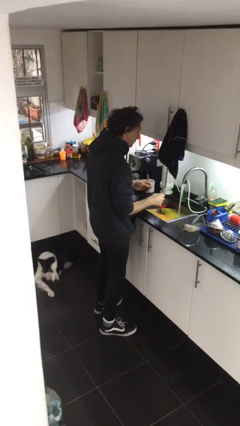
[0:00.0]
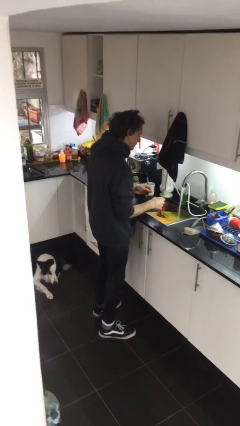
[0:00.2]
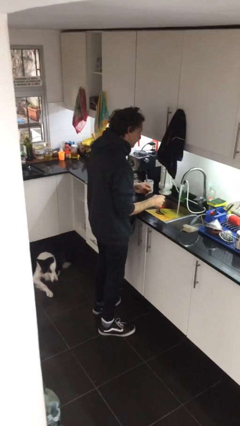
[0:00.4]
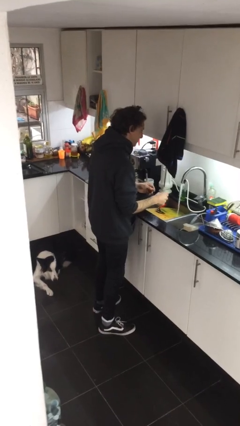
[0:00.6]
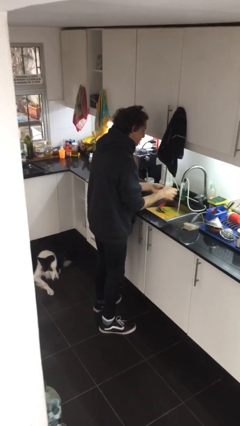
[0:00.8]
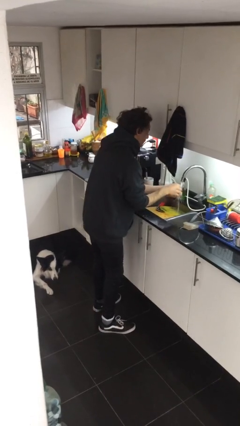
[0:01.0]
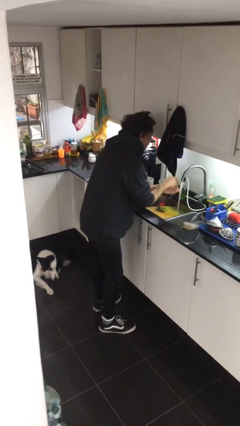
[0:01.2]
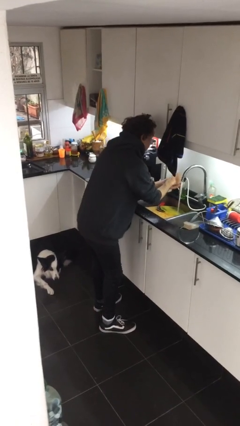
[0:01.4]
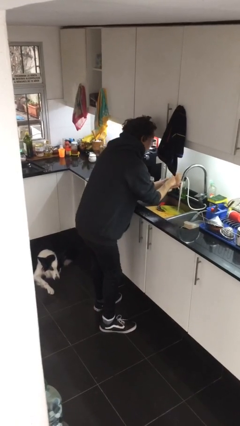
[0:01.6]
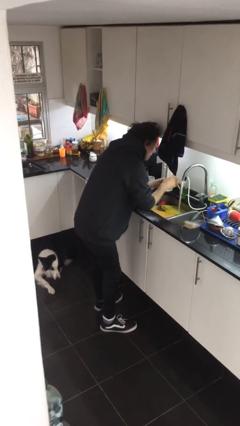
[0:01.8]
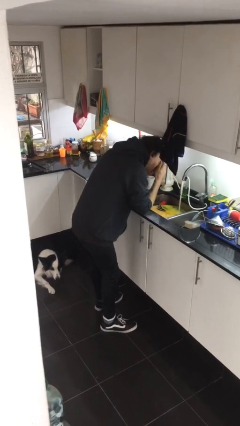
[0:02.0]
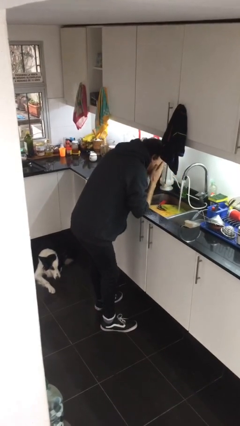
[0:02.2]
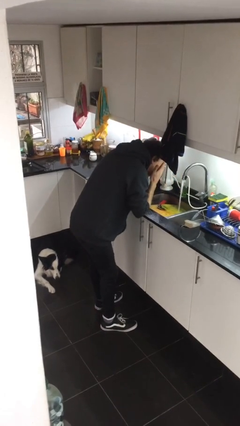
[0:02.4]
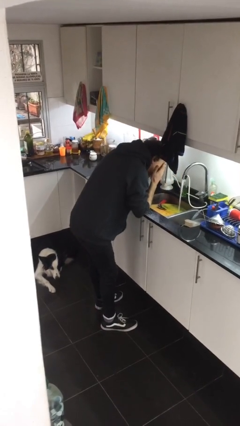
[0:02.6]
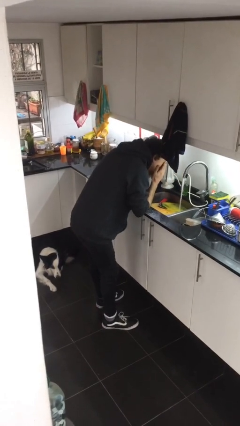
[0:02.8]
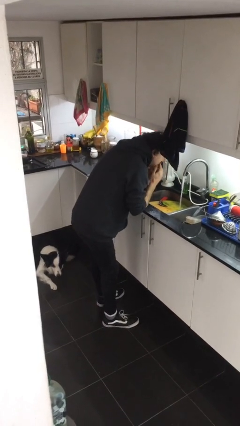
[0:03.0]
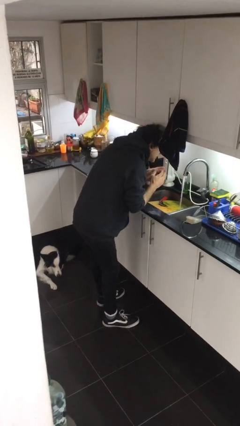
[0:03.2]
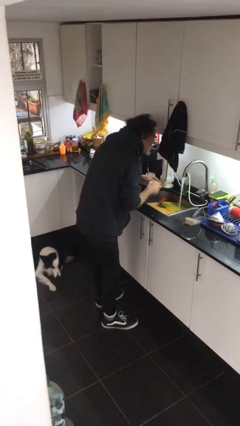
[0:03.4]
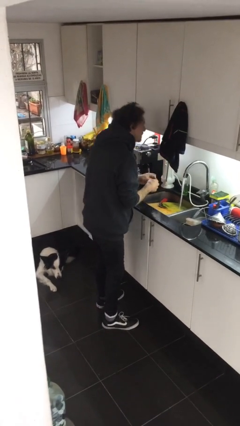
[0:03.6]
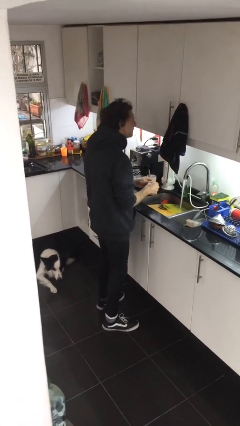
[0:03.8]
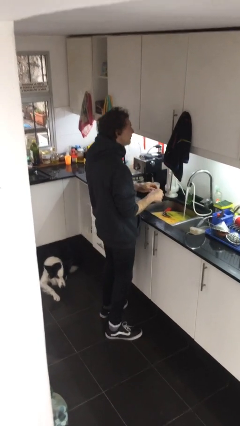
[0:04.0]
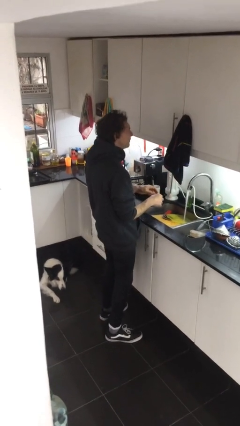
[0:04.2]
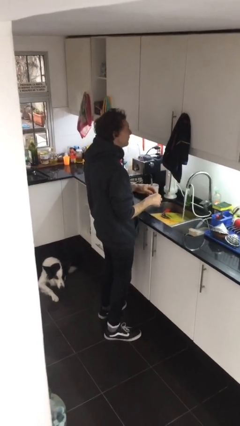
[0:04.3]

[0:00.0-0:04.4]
person washes face

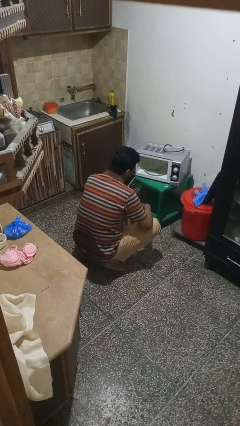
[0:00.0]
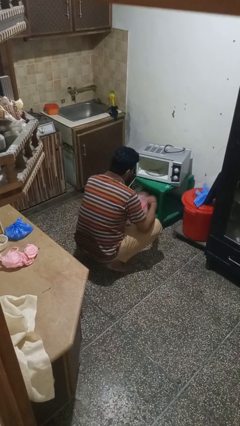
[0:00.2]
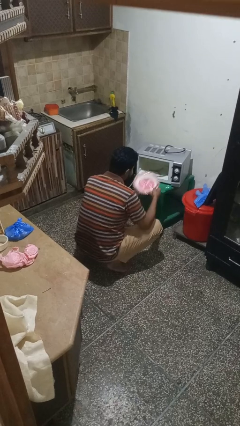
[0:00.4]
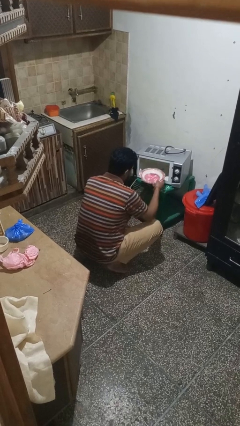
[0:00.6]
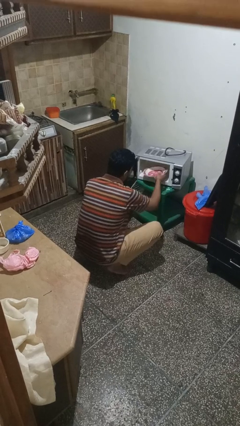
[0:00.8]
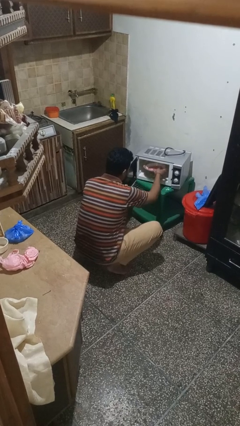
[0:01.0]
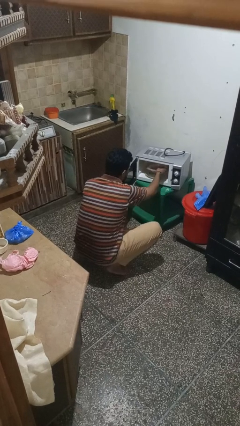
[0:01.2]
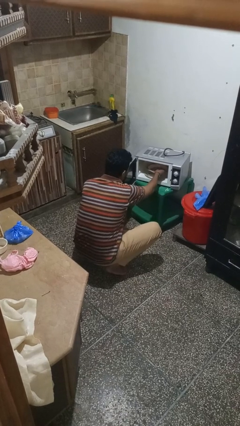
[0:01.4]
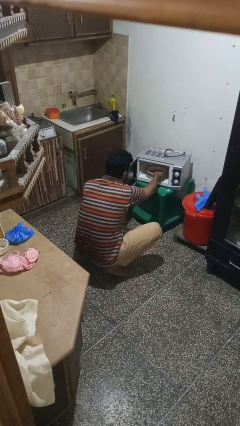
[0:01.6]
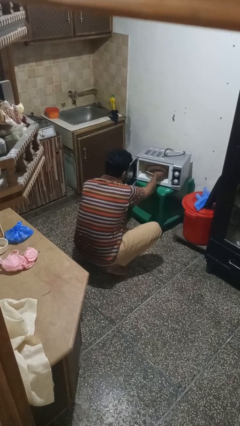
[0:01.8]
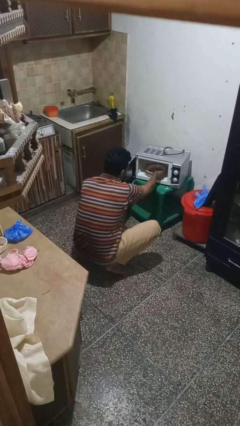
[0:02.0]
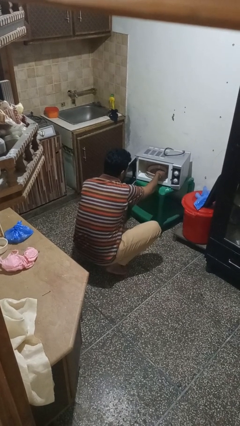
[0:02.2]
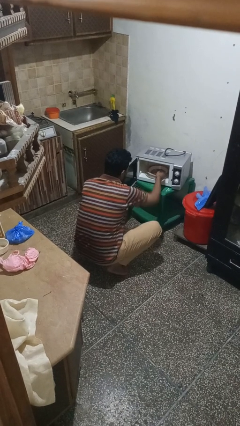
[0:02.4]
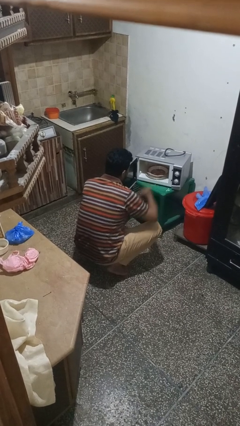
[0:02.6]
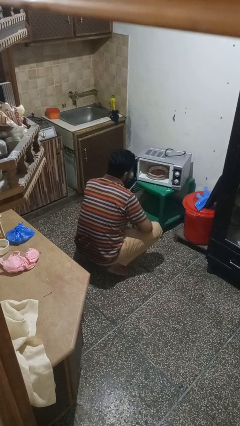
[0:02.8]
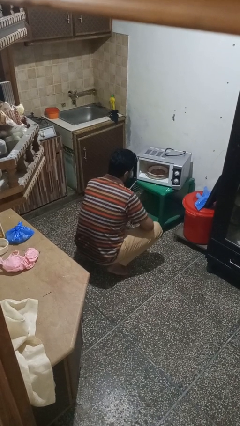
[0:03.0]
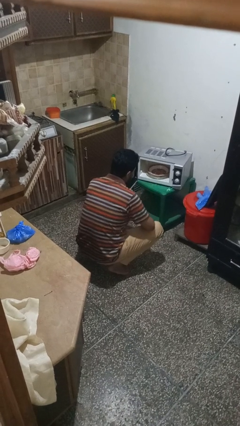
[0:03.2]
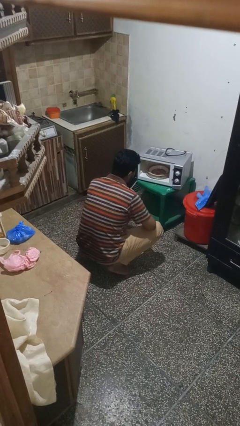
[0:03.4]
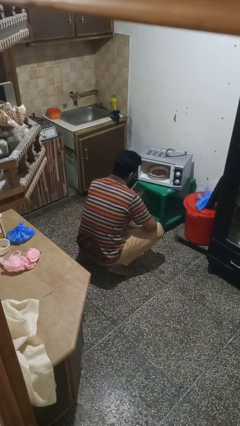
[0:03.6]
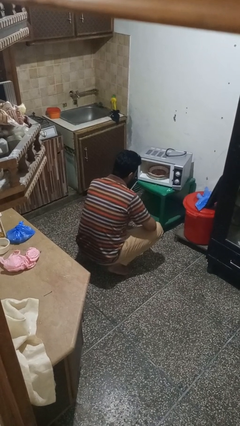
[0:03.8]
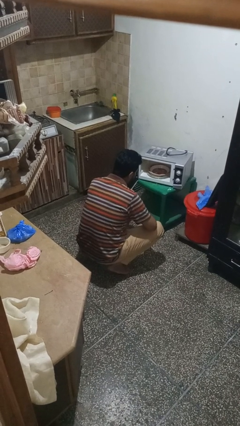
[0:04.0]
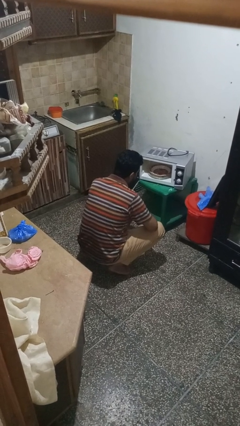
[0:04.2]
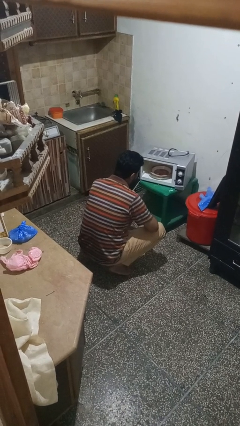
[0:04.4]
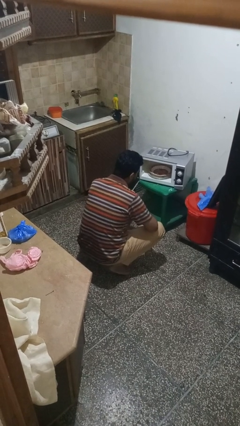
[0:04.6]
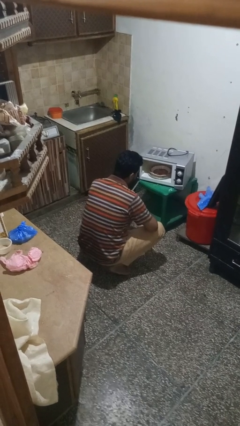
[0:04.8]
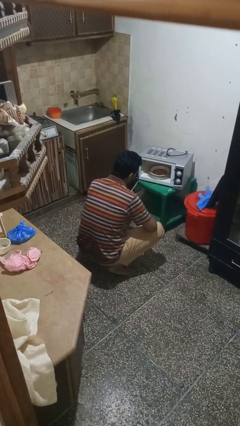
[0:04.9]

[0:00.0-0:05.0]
person puts object into microwave

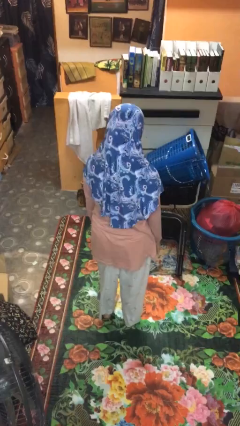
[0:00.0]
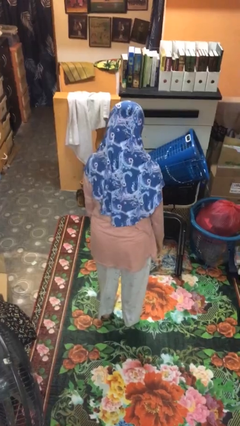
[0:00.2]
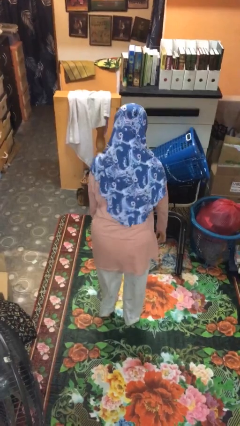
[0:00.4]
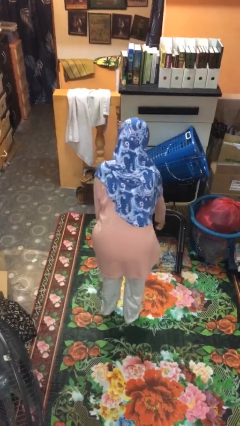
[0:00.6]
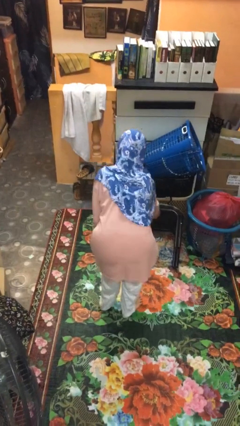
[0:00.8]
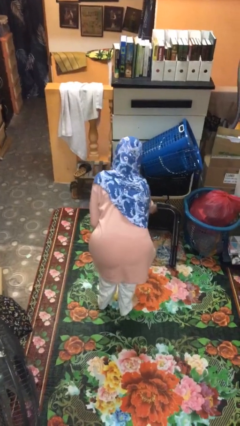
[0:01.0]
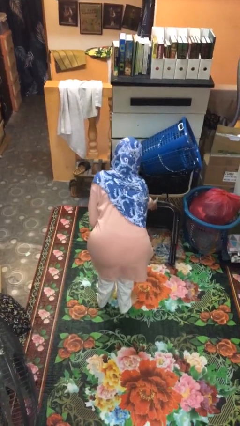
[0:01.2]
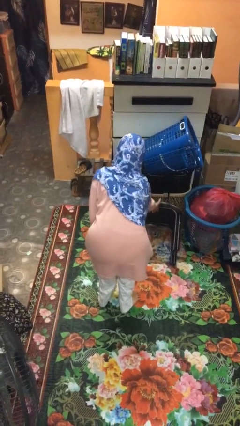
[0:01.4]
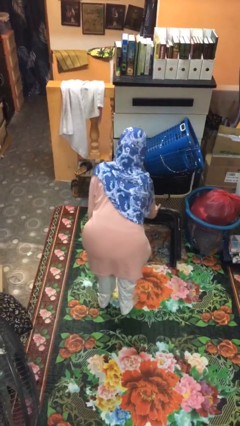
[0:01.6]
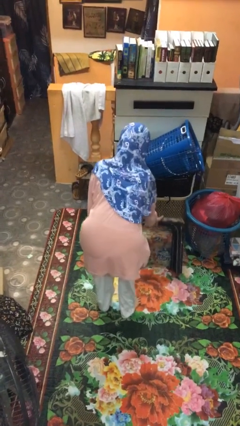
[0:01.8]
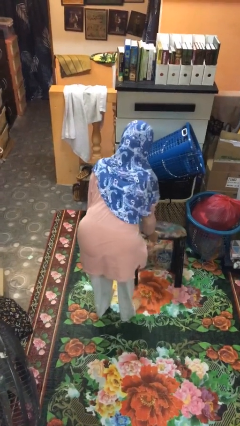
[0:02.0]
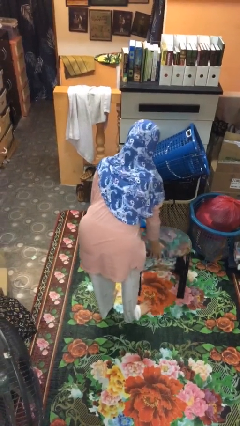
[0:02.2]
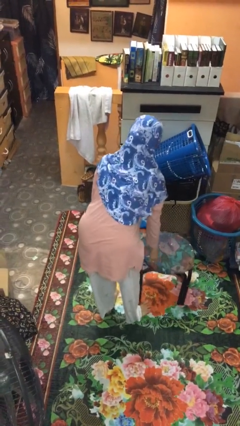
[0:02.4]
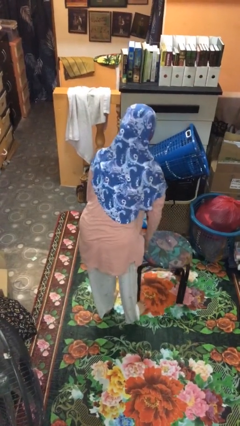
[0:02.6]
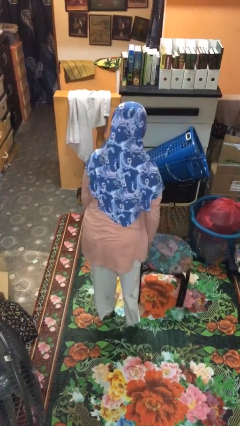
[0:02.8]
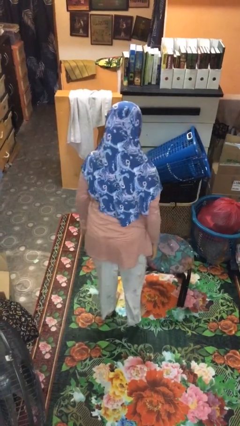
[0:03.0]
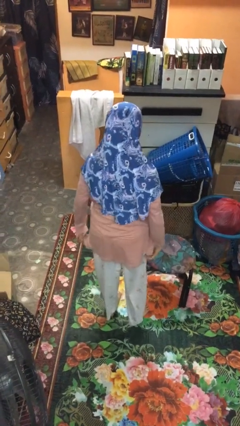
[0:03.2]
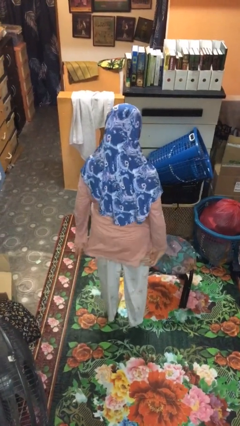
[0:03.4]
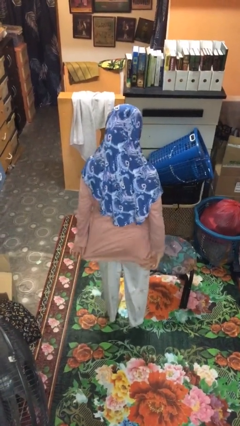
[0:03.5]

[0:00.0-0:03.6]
person sets upright furniture

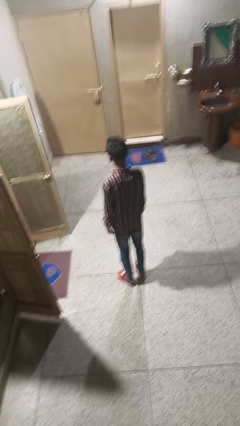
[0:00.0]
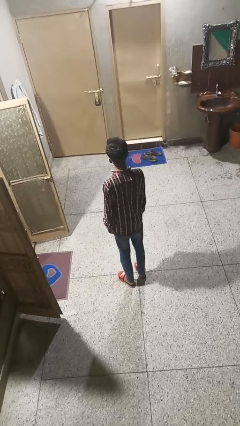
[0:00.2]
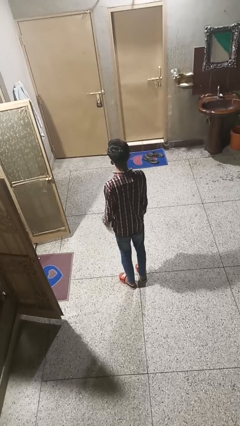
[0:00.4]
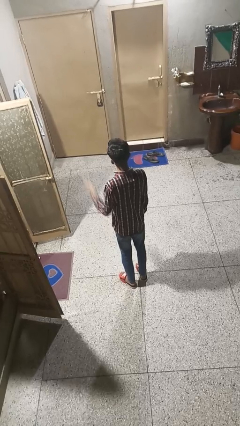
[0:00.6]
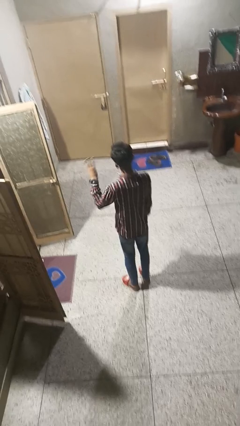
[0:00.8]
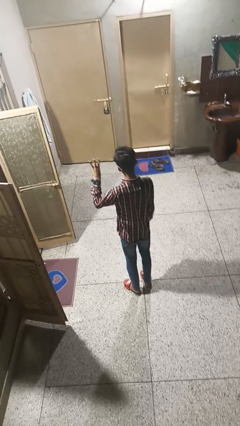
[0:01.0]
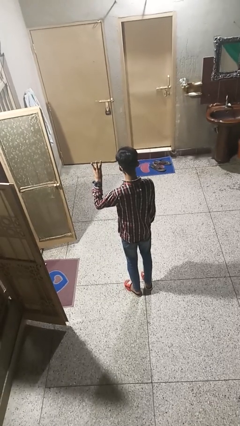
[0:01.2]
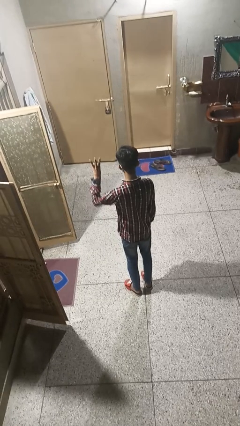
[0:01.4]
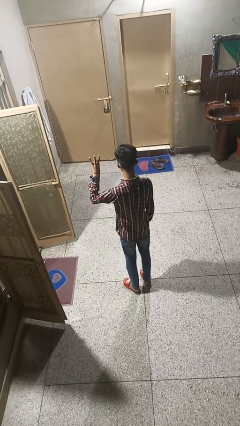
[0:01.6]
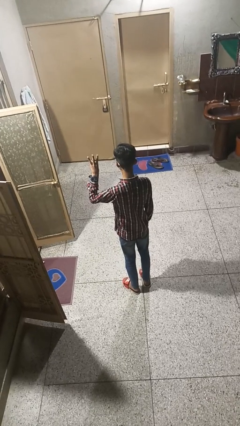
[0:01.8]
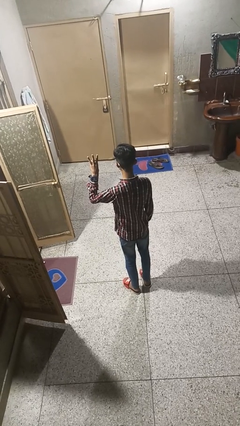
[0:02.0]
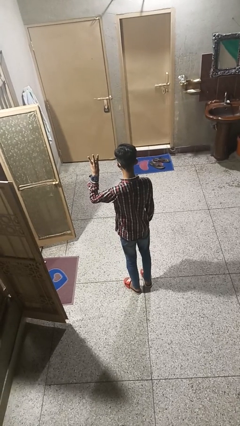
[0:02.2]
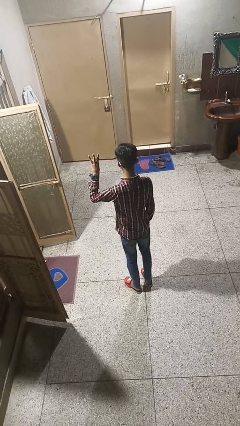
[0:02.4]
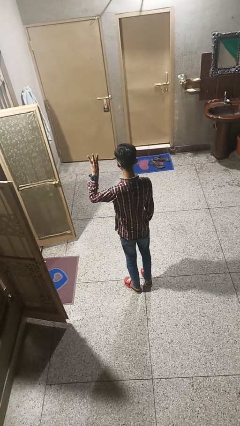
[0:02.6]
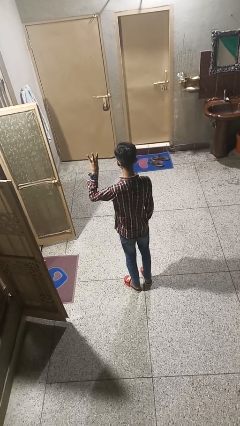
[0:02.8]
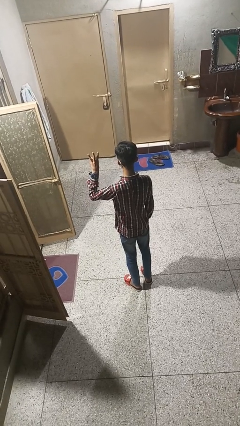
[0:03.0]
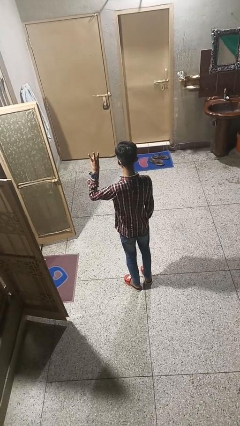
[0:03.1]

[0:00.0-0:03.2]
person gestures number three

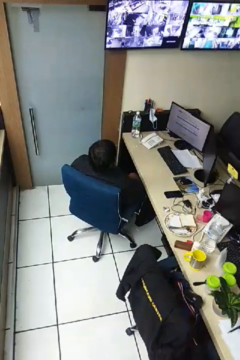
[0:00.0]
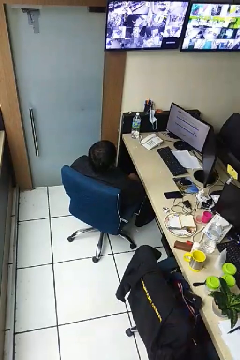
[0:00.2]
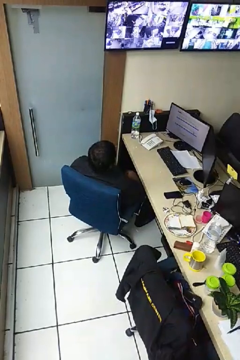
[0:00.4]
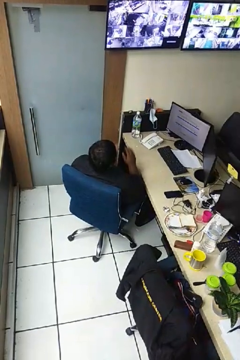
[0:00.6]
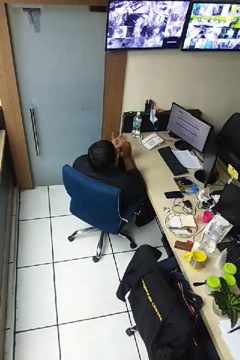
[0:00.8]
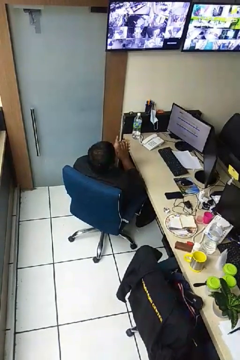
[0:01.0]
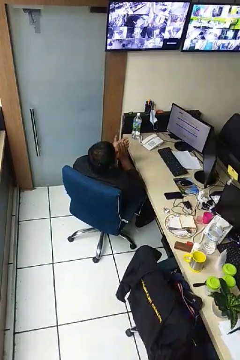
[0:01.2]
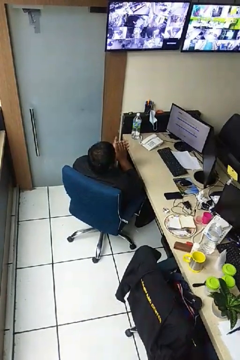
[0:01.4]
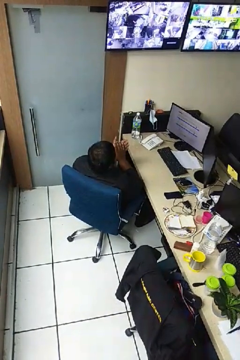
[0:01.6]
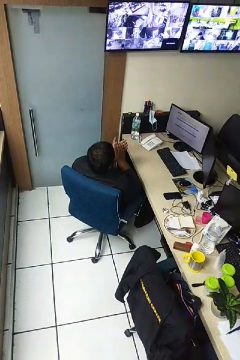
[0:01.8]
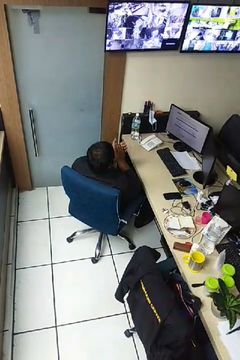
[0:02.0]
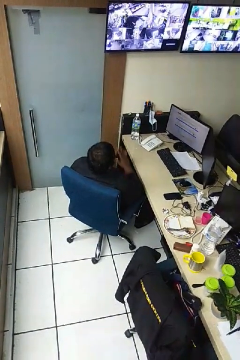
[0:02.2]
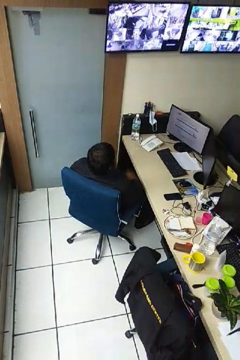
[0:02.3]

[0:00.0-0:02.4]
person claps hands
